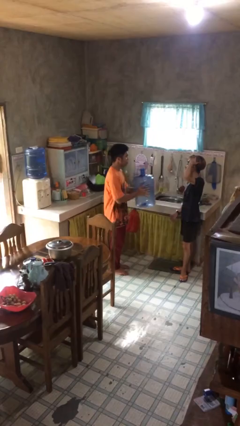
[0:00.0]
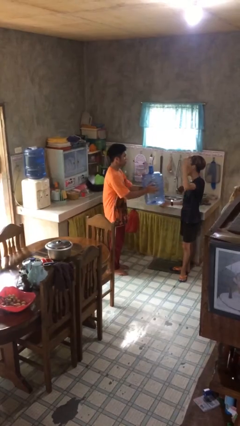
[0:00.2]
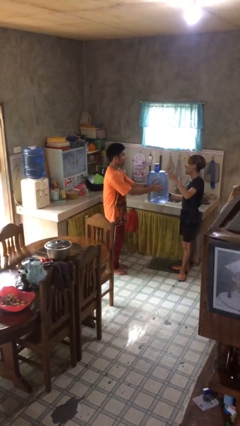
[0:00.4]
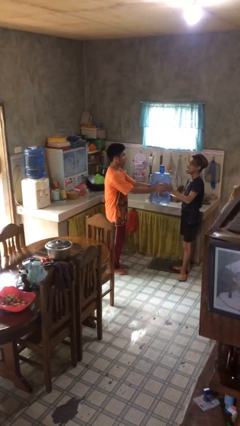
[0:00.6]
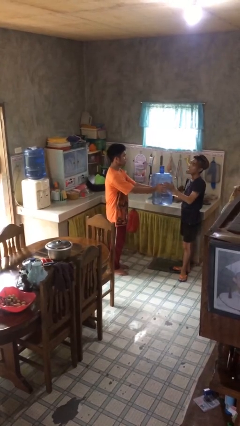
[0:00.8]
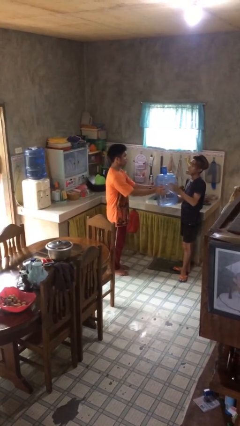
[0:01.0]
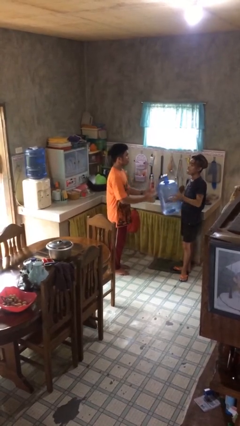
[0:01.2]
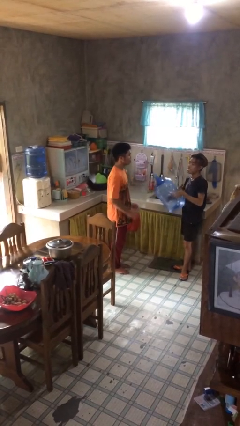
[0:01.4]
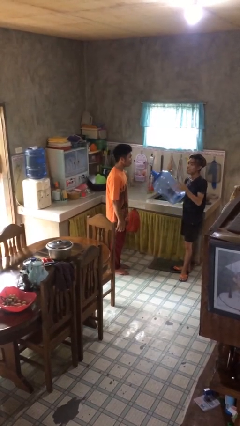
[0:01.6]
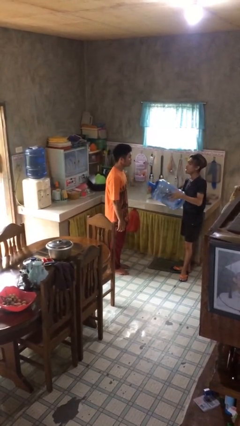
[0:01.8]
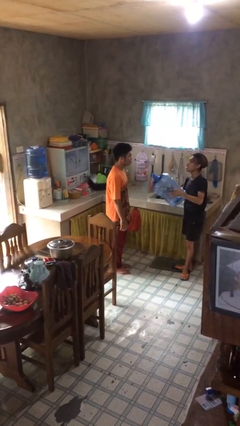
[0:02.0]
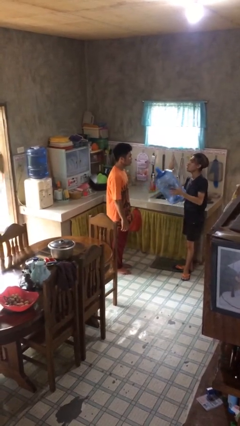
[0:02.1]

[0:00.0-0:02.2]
person transfers object to person

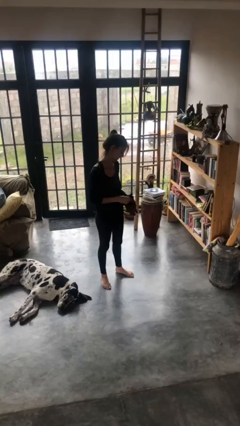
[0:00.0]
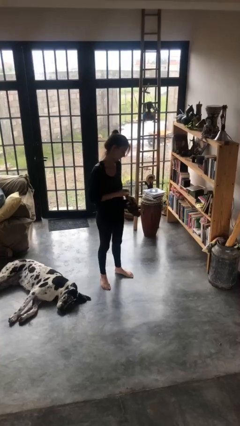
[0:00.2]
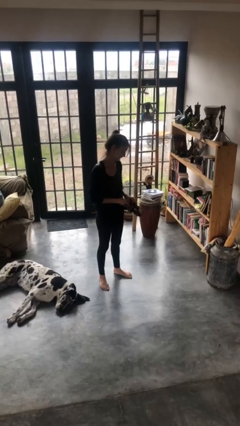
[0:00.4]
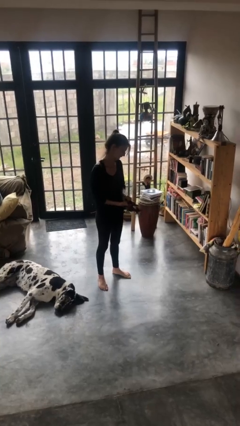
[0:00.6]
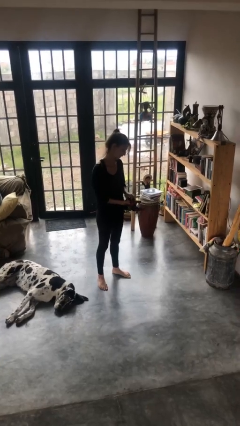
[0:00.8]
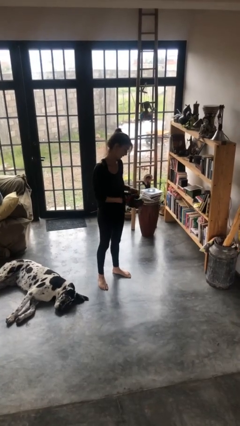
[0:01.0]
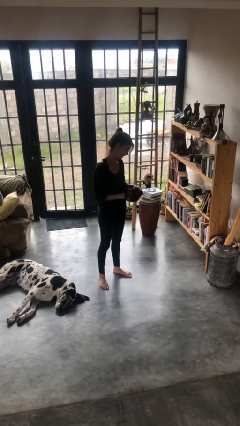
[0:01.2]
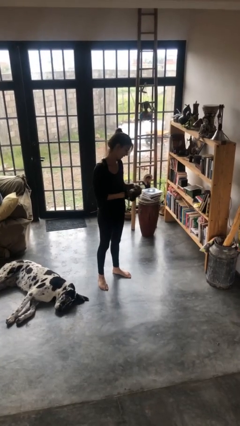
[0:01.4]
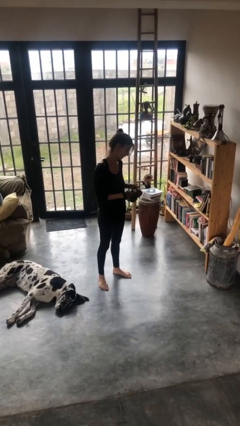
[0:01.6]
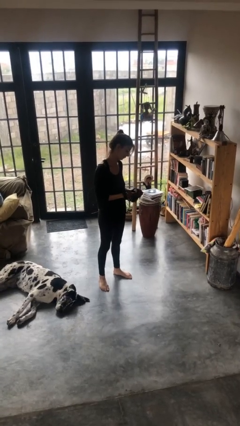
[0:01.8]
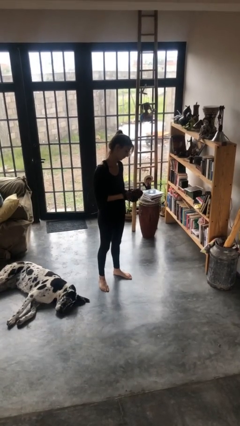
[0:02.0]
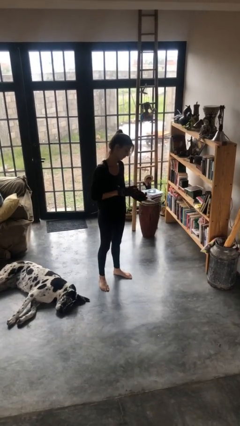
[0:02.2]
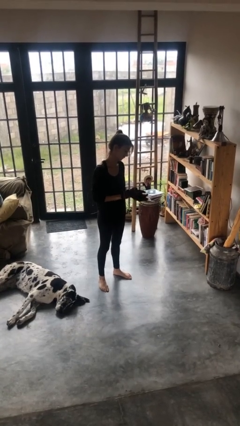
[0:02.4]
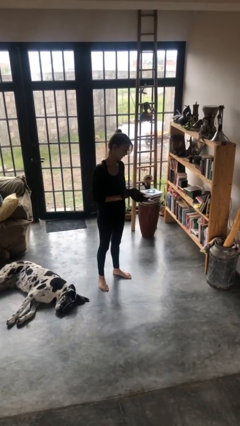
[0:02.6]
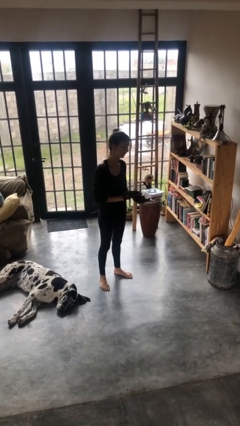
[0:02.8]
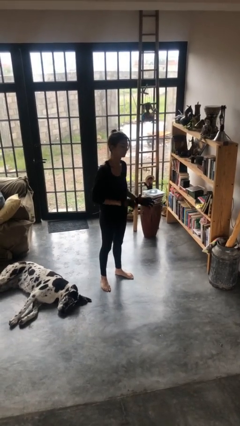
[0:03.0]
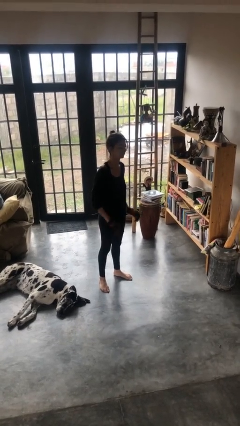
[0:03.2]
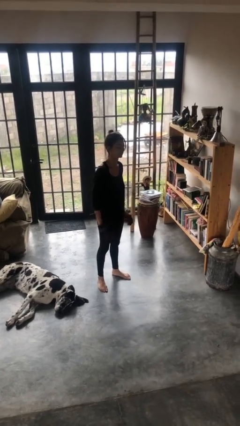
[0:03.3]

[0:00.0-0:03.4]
person puts on gloves

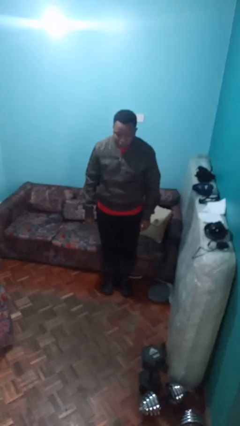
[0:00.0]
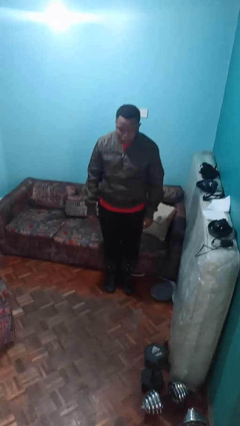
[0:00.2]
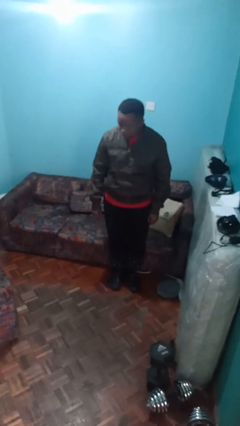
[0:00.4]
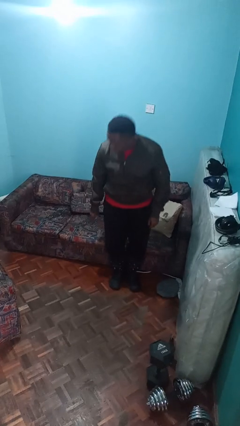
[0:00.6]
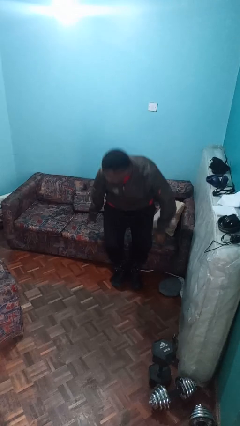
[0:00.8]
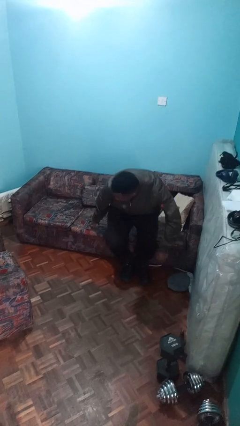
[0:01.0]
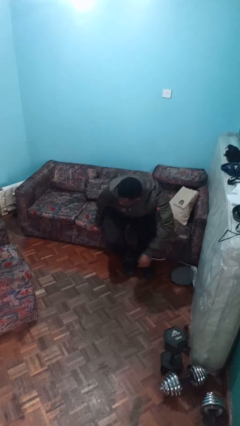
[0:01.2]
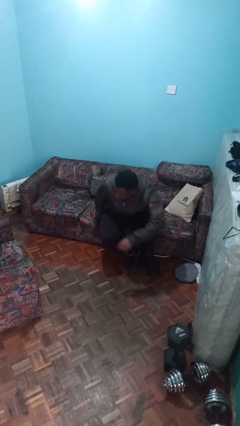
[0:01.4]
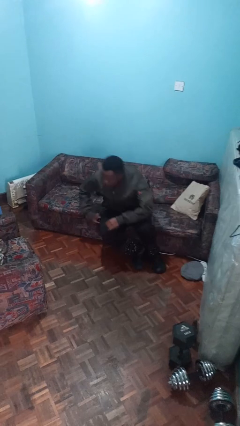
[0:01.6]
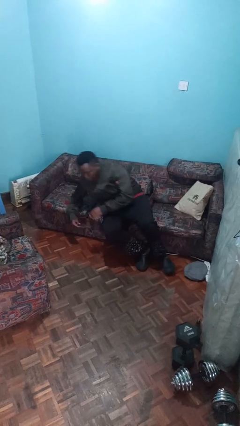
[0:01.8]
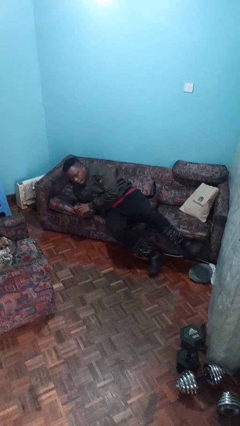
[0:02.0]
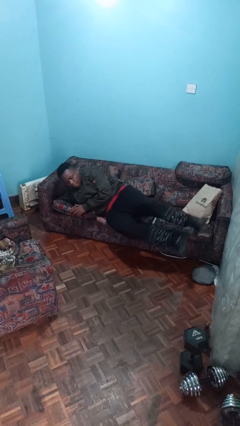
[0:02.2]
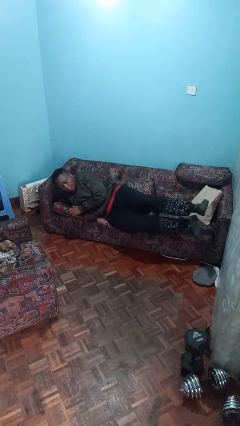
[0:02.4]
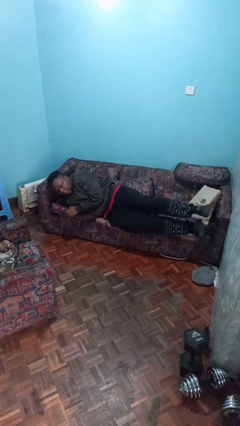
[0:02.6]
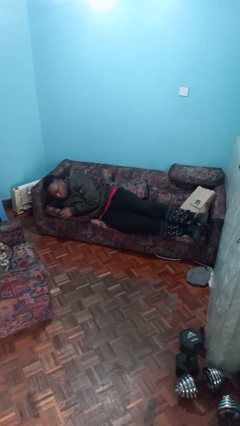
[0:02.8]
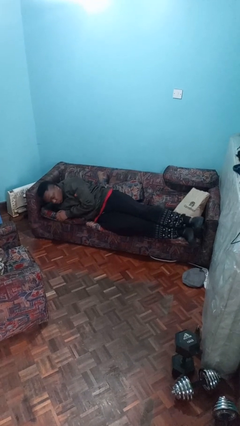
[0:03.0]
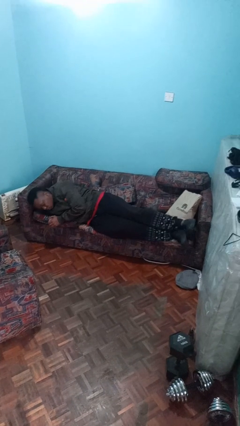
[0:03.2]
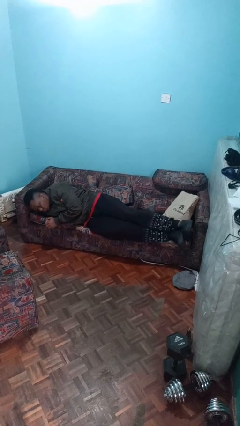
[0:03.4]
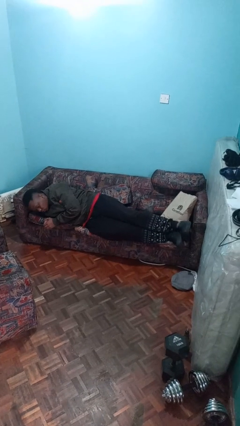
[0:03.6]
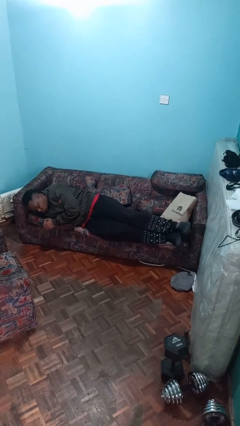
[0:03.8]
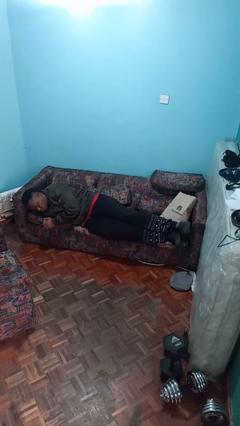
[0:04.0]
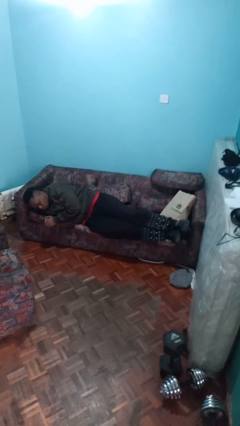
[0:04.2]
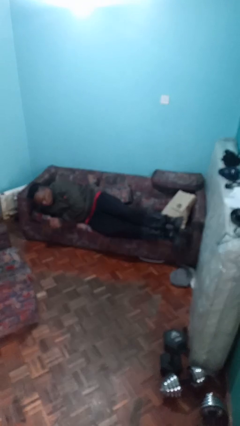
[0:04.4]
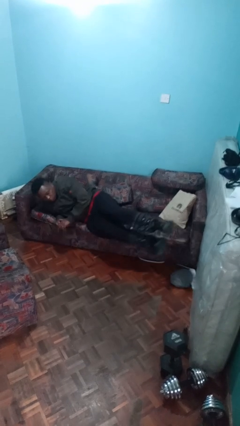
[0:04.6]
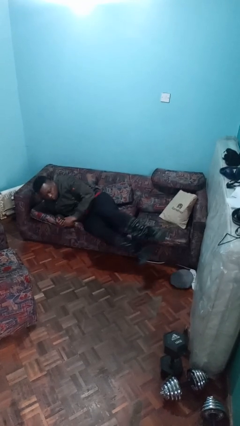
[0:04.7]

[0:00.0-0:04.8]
person lies down on couch

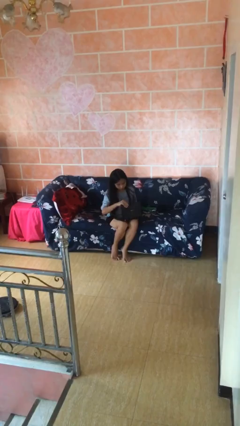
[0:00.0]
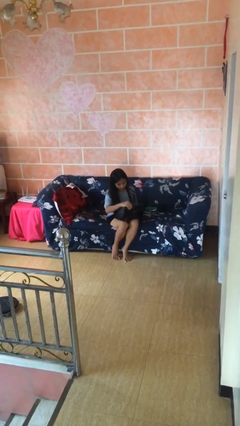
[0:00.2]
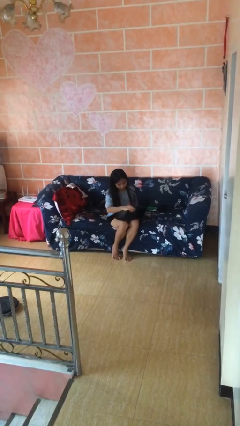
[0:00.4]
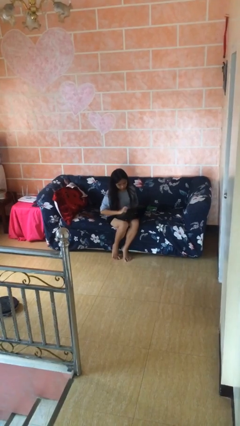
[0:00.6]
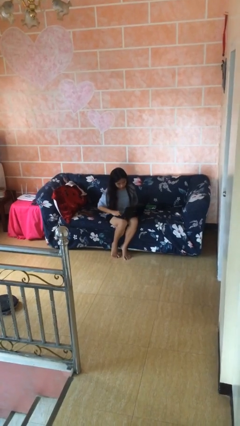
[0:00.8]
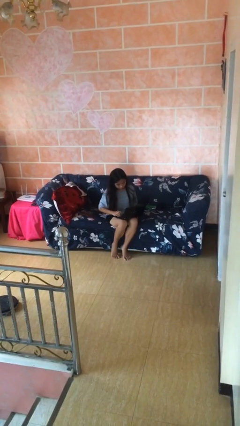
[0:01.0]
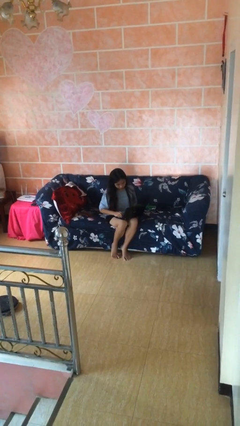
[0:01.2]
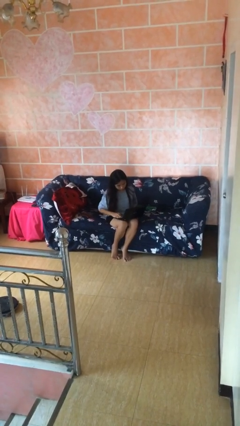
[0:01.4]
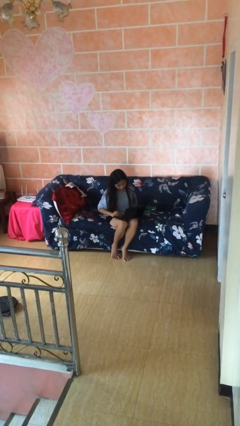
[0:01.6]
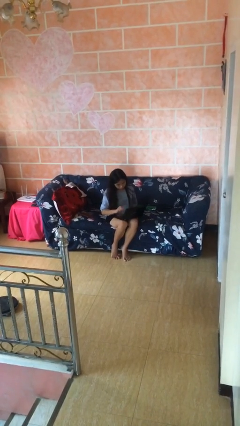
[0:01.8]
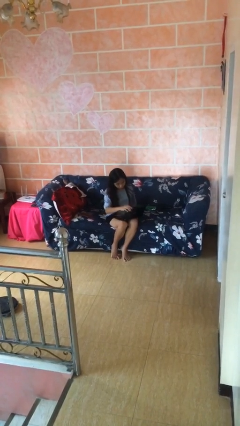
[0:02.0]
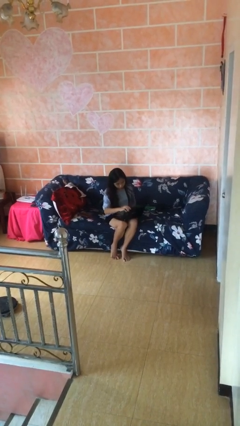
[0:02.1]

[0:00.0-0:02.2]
person interacts with laptop

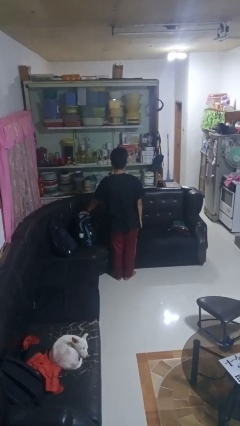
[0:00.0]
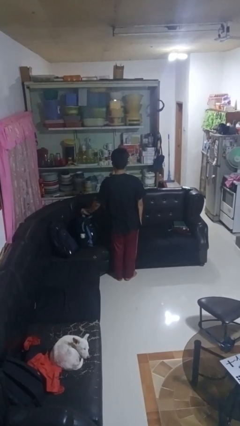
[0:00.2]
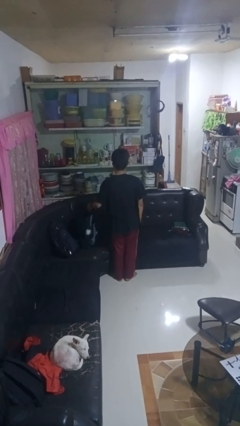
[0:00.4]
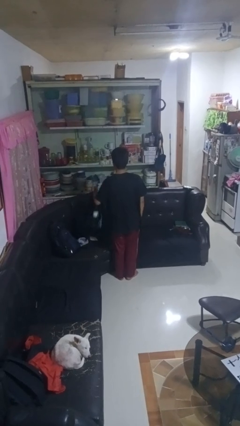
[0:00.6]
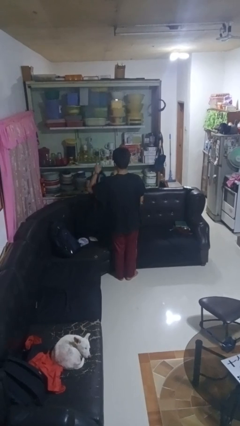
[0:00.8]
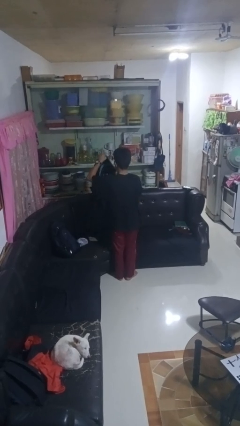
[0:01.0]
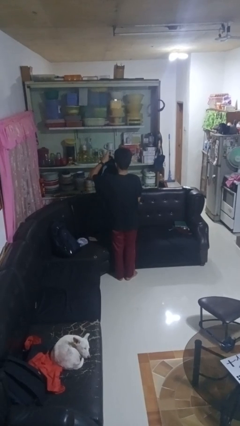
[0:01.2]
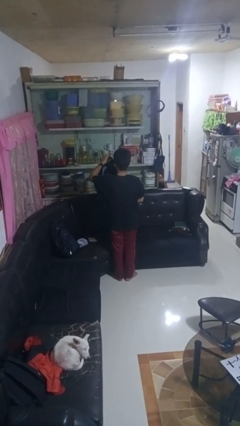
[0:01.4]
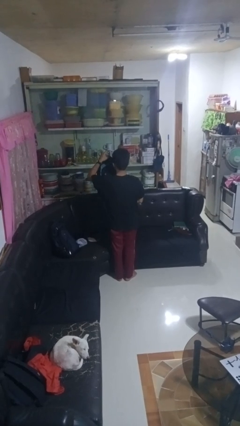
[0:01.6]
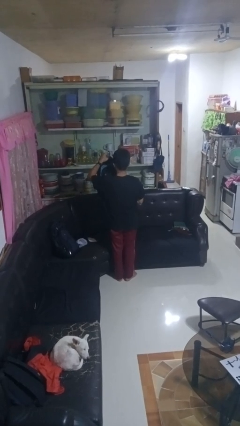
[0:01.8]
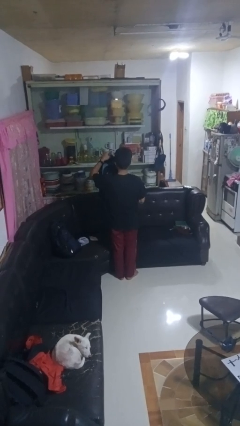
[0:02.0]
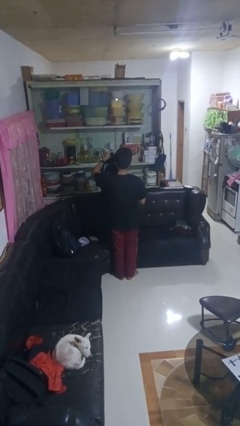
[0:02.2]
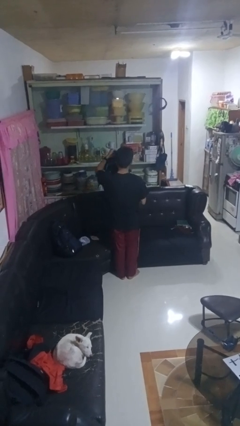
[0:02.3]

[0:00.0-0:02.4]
person picks up object from couch

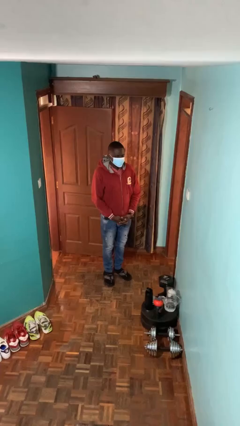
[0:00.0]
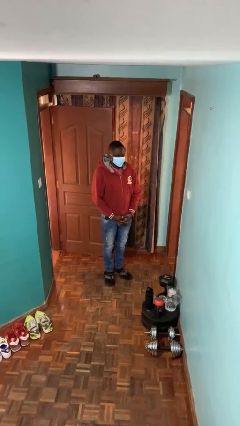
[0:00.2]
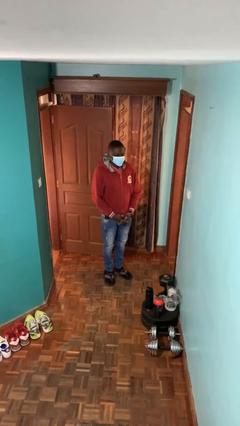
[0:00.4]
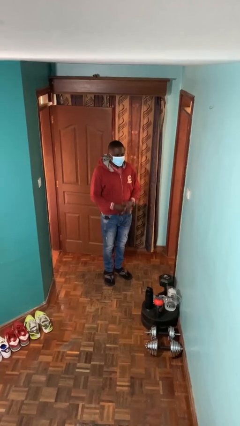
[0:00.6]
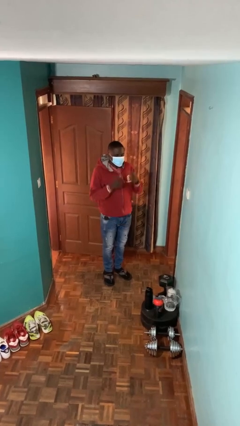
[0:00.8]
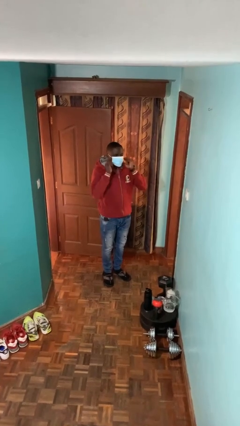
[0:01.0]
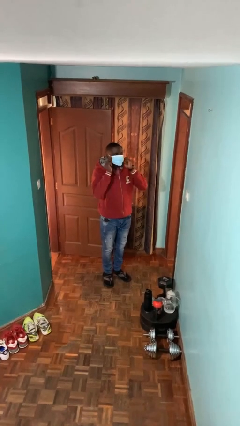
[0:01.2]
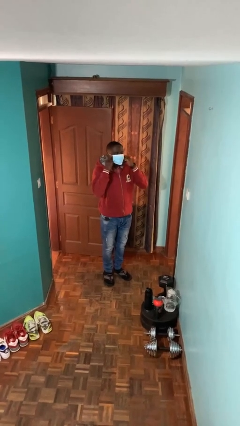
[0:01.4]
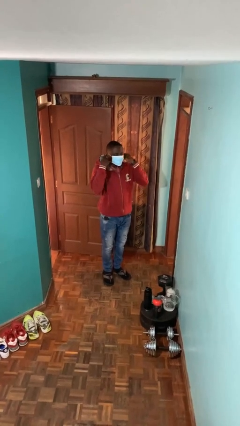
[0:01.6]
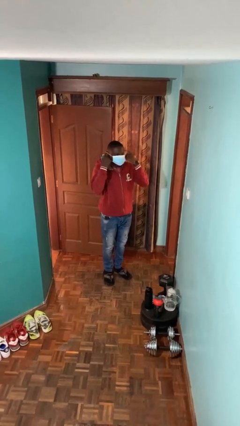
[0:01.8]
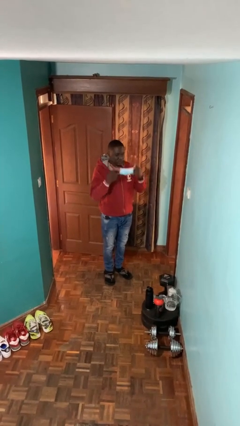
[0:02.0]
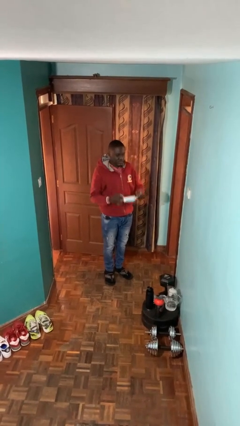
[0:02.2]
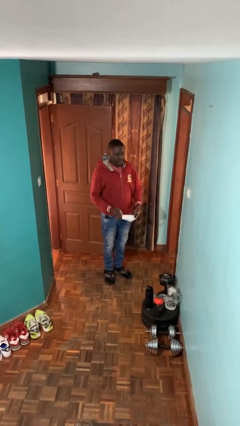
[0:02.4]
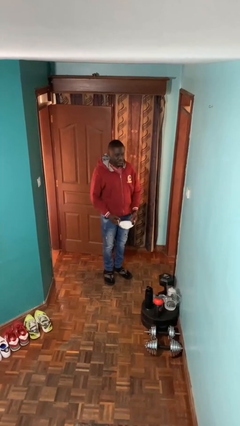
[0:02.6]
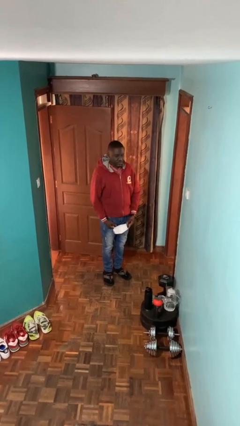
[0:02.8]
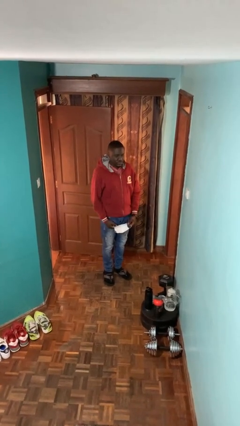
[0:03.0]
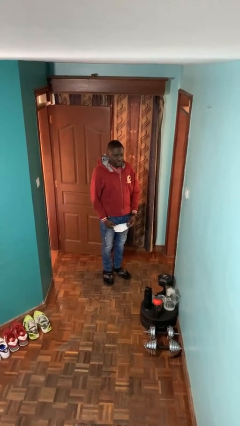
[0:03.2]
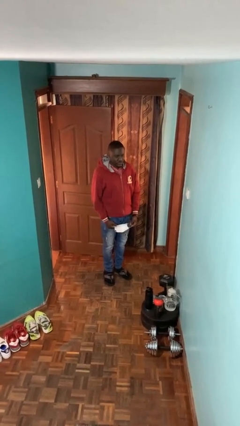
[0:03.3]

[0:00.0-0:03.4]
person takes off facemask
